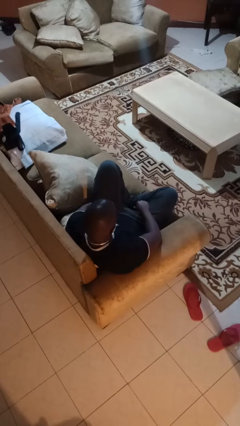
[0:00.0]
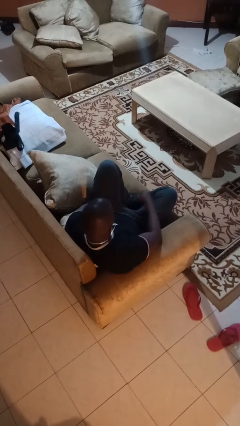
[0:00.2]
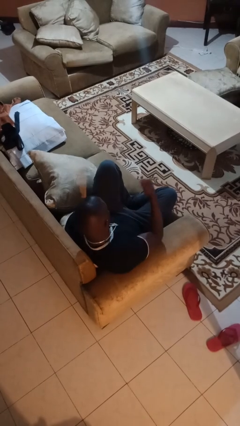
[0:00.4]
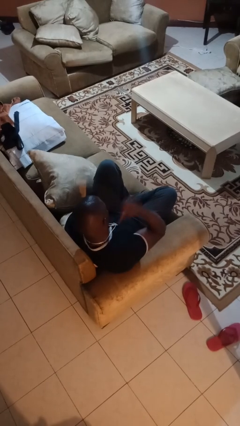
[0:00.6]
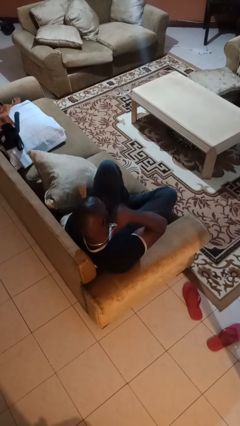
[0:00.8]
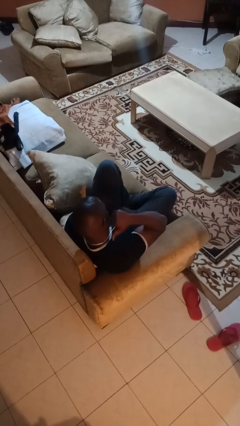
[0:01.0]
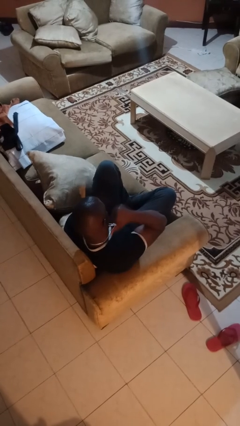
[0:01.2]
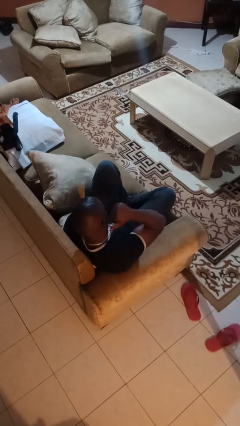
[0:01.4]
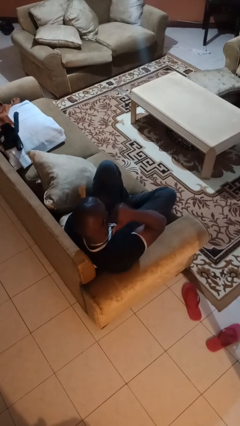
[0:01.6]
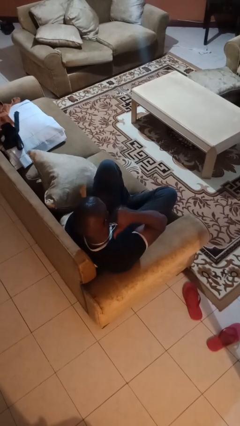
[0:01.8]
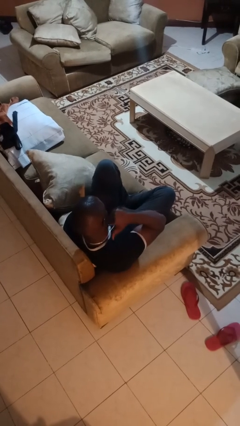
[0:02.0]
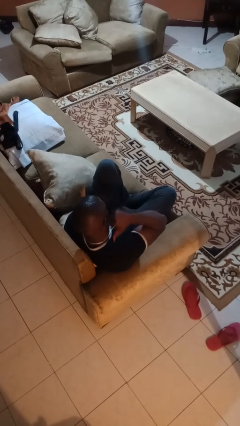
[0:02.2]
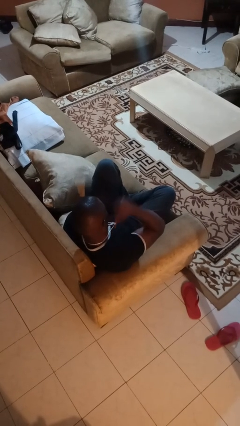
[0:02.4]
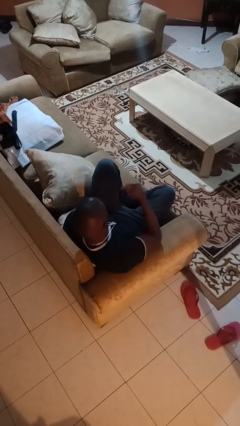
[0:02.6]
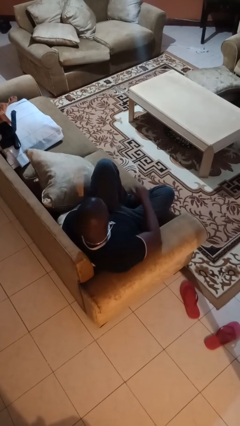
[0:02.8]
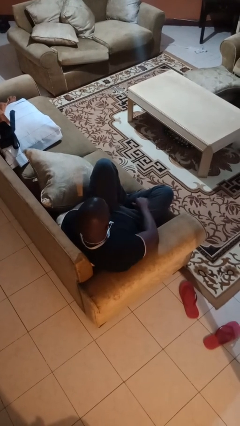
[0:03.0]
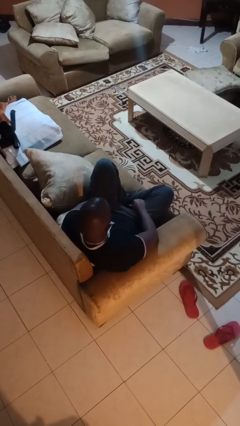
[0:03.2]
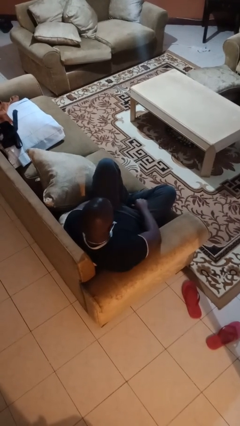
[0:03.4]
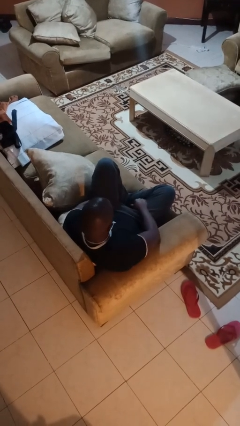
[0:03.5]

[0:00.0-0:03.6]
person gestures behind me

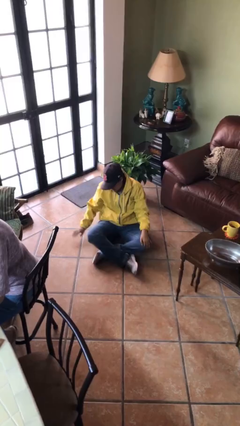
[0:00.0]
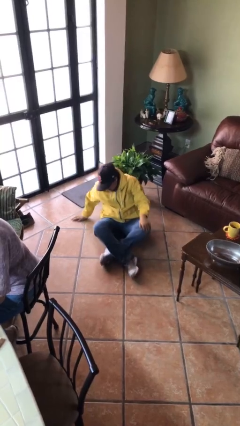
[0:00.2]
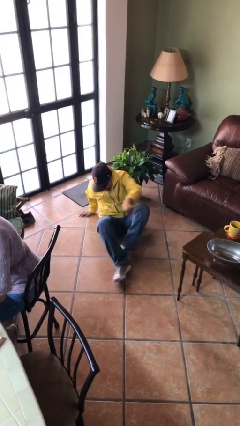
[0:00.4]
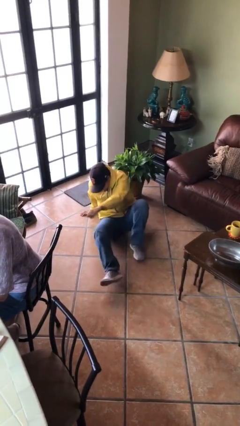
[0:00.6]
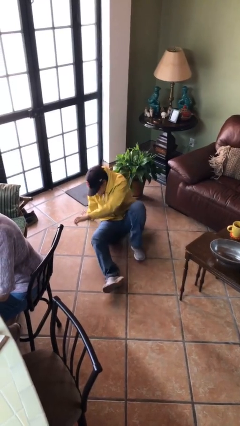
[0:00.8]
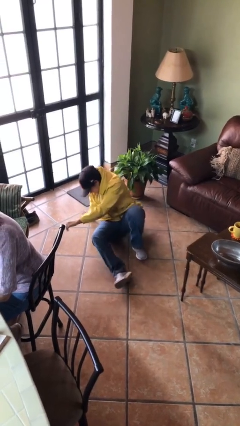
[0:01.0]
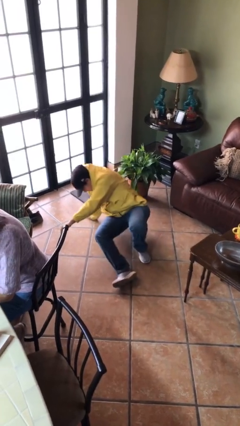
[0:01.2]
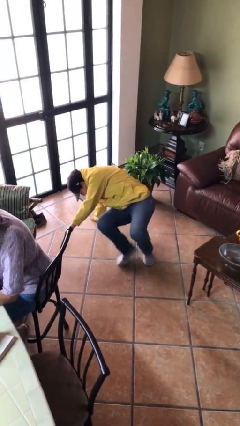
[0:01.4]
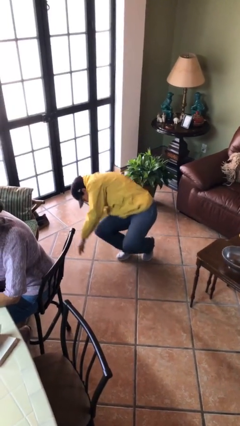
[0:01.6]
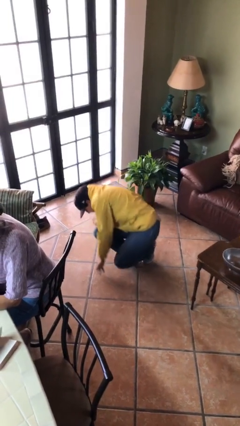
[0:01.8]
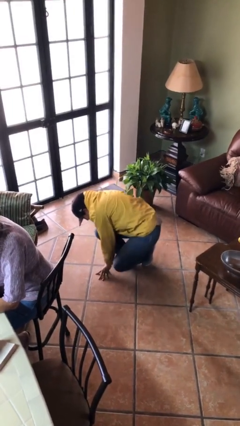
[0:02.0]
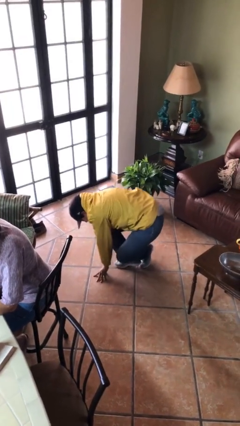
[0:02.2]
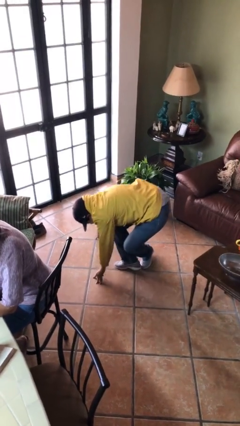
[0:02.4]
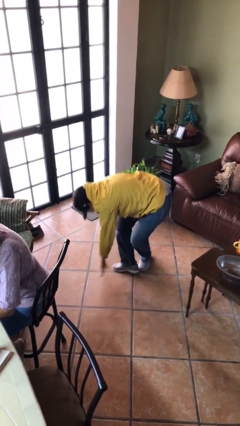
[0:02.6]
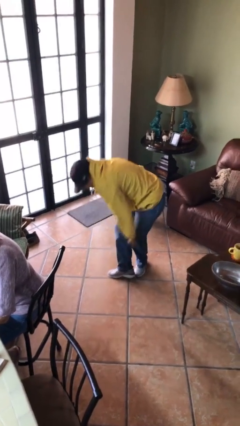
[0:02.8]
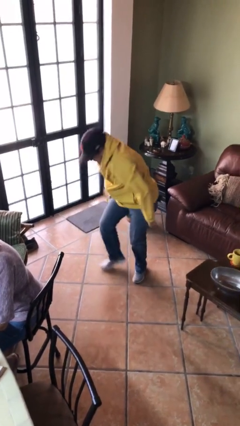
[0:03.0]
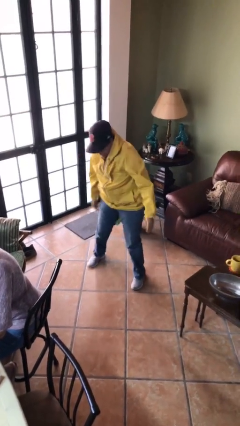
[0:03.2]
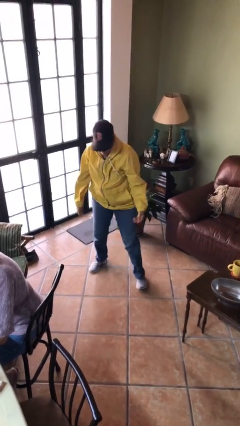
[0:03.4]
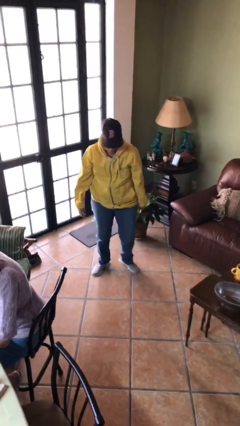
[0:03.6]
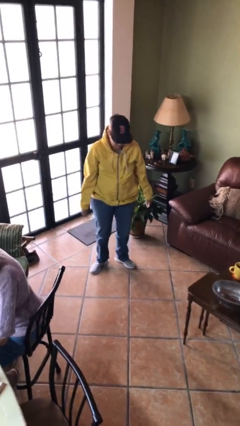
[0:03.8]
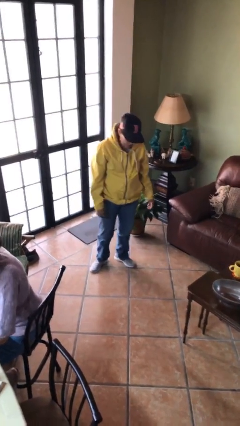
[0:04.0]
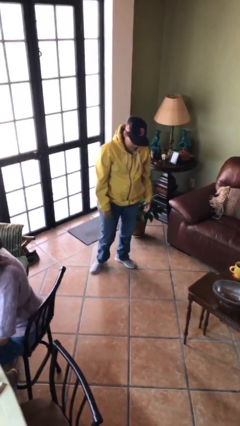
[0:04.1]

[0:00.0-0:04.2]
person stands up from floor

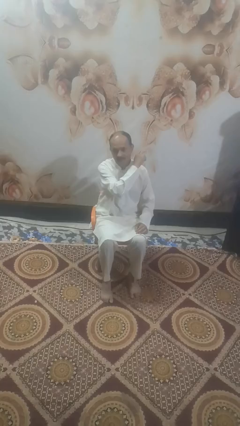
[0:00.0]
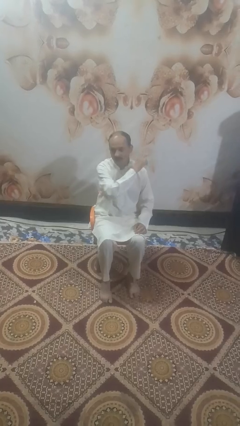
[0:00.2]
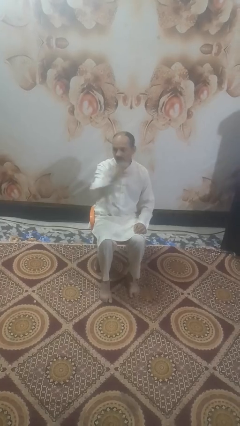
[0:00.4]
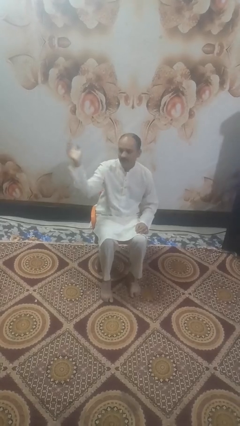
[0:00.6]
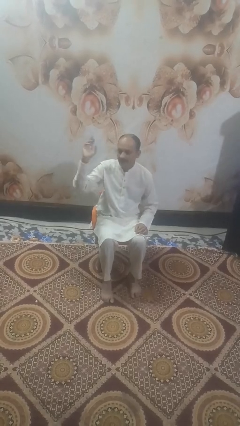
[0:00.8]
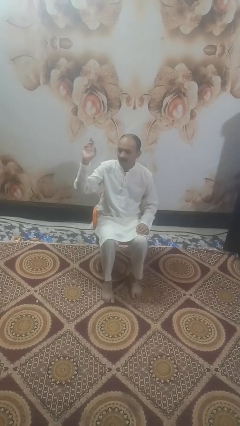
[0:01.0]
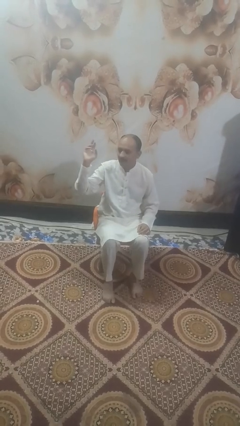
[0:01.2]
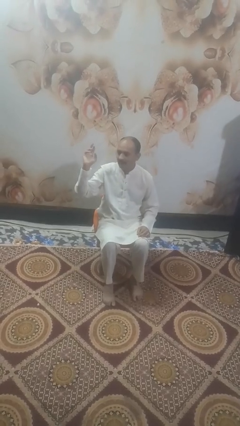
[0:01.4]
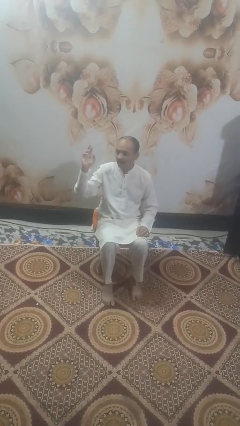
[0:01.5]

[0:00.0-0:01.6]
person gestures swipe right

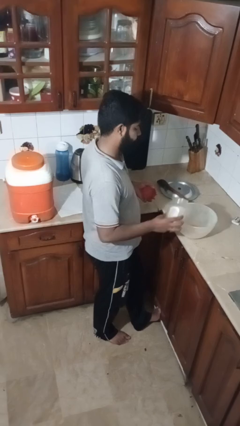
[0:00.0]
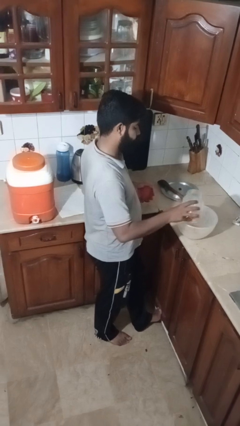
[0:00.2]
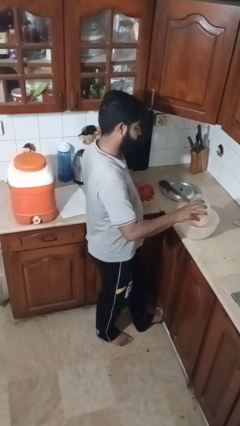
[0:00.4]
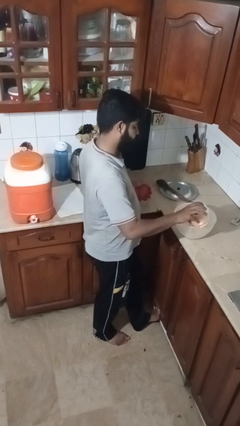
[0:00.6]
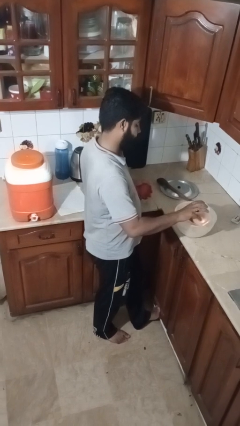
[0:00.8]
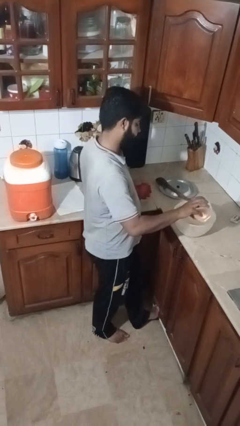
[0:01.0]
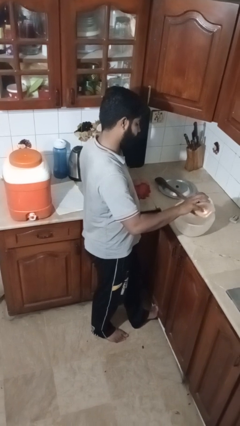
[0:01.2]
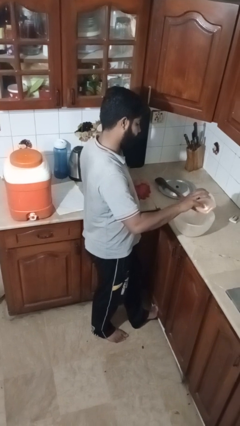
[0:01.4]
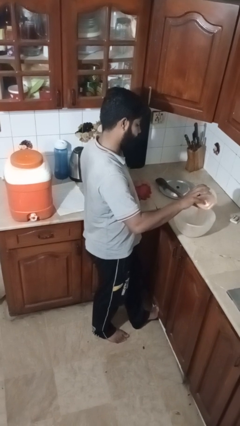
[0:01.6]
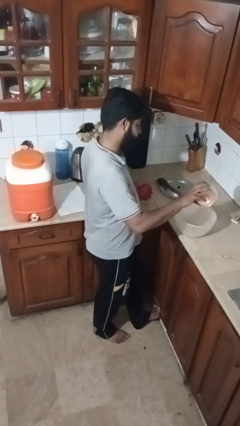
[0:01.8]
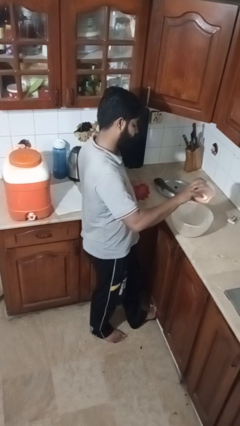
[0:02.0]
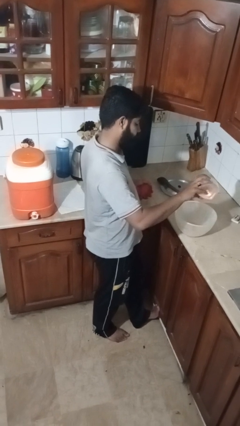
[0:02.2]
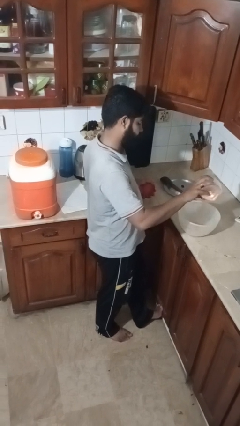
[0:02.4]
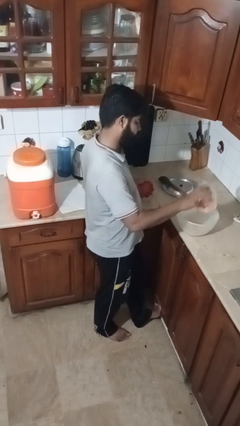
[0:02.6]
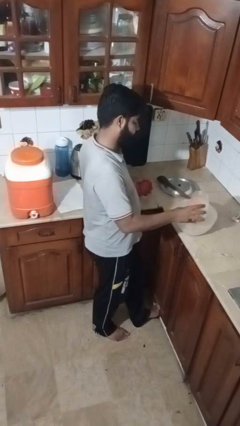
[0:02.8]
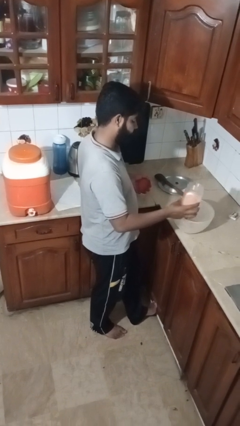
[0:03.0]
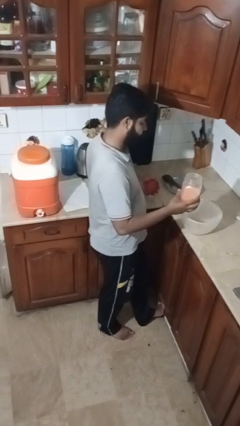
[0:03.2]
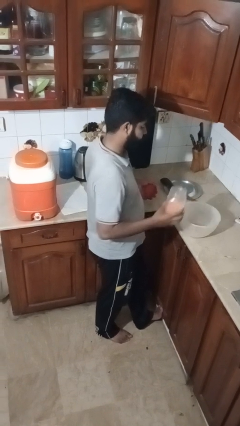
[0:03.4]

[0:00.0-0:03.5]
person pours into bowl

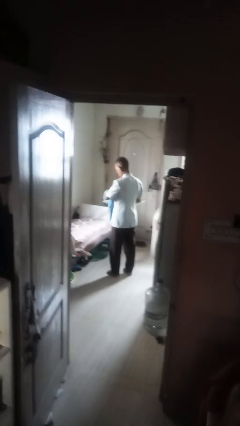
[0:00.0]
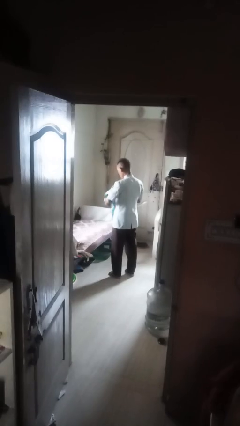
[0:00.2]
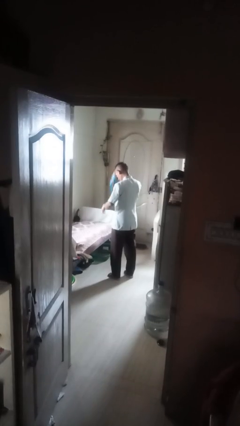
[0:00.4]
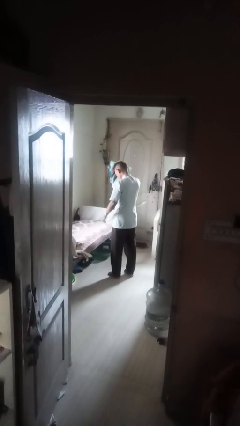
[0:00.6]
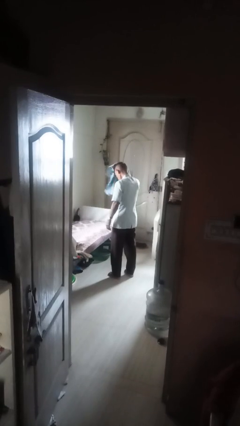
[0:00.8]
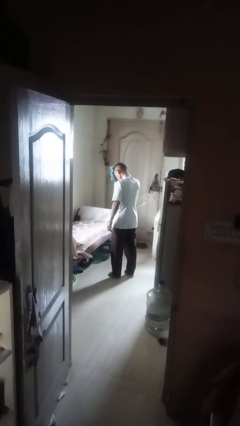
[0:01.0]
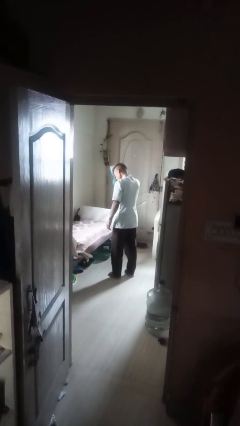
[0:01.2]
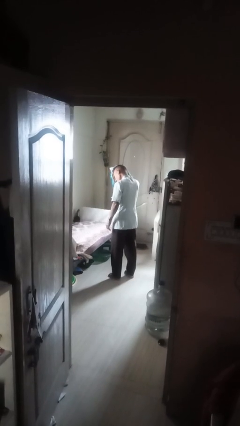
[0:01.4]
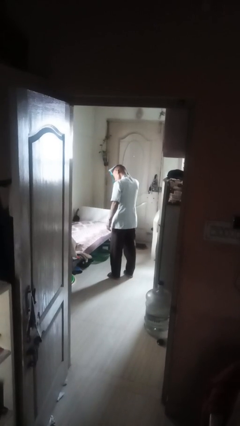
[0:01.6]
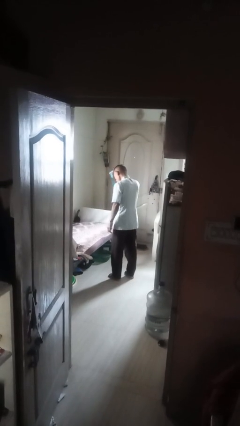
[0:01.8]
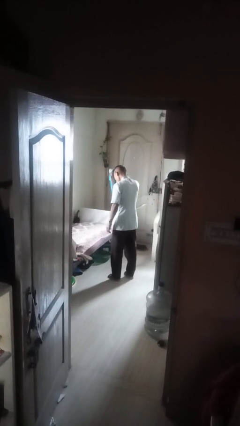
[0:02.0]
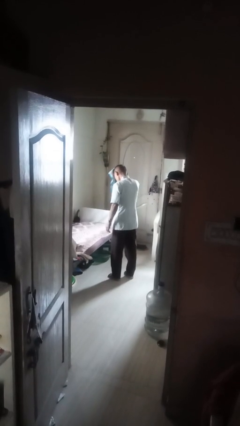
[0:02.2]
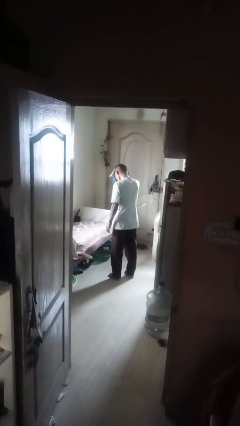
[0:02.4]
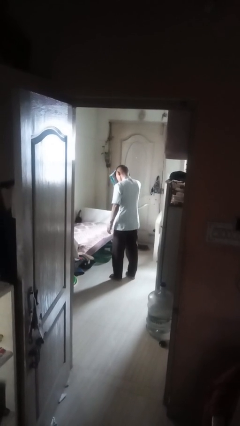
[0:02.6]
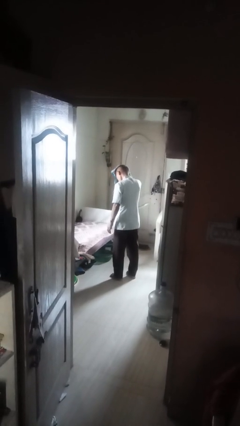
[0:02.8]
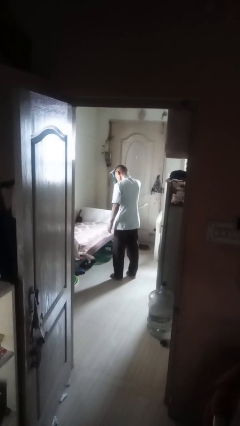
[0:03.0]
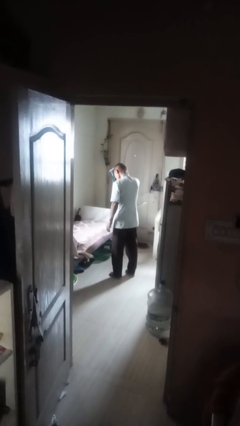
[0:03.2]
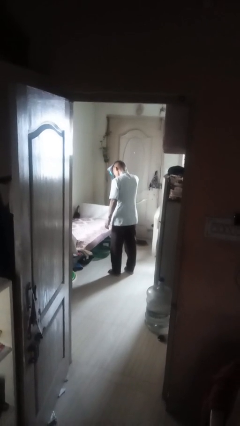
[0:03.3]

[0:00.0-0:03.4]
person dries hair with towel

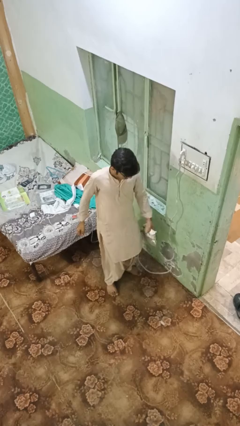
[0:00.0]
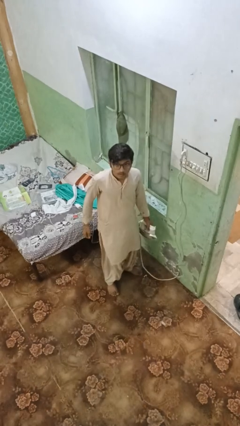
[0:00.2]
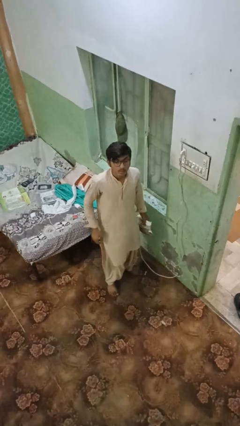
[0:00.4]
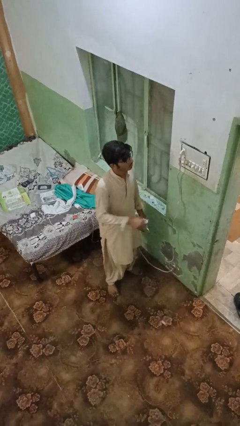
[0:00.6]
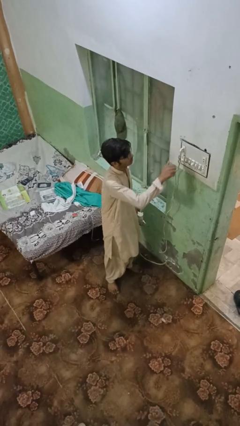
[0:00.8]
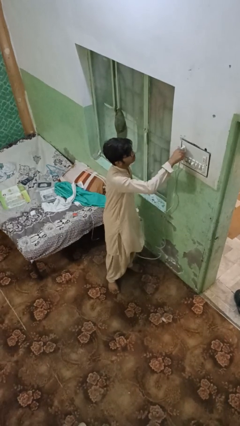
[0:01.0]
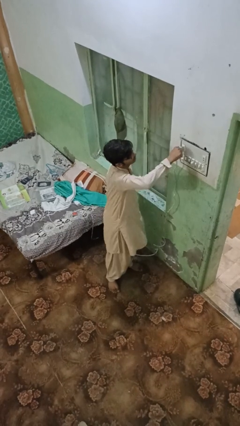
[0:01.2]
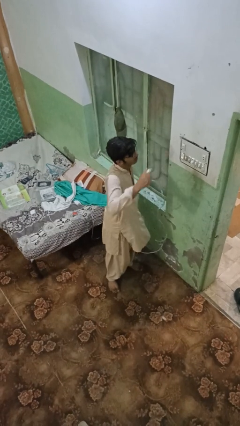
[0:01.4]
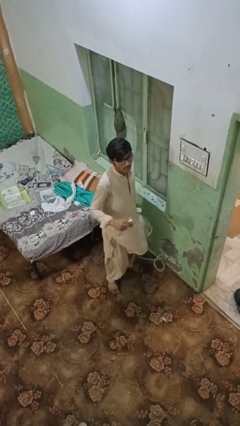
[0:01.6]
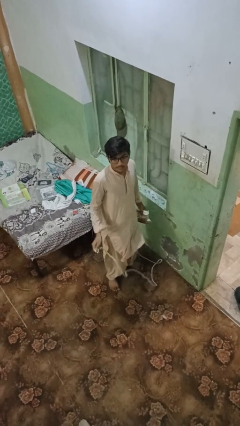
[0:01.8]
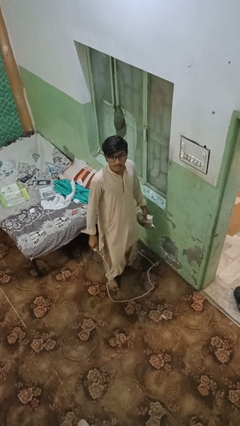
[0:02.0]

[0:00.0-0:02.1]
person unplugs from electrical socket
